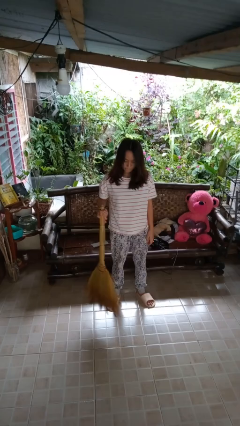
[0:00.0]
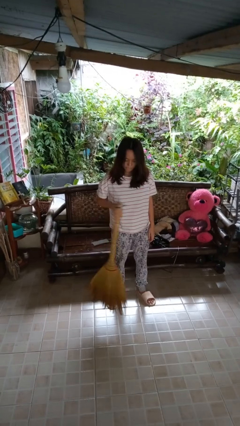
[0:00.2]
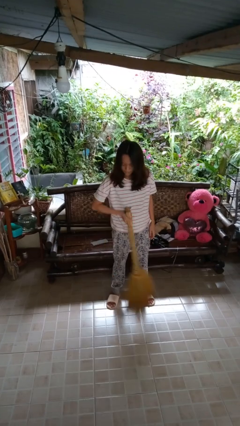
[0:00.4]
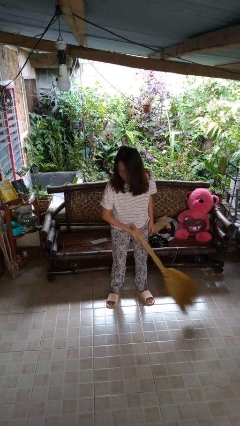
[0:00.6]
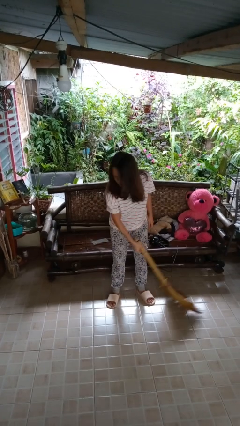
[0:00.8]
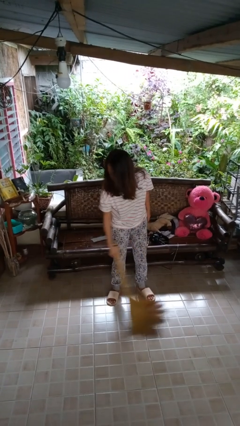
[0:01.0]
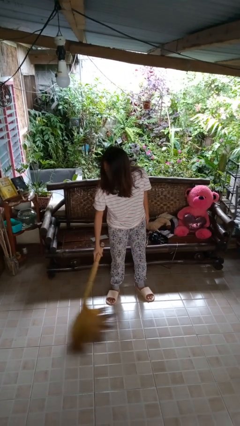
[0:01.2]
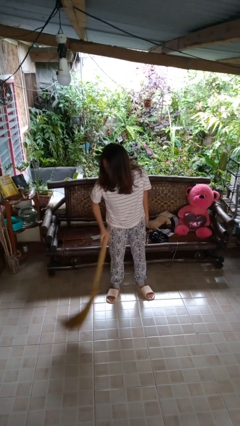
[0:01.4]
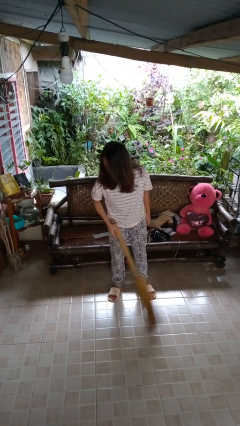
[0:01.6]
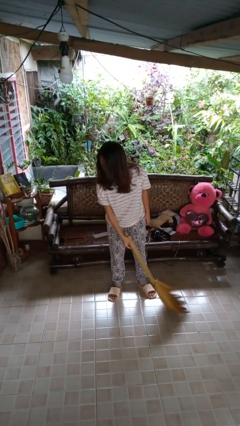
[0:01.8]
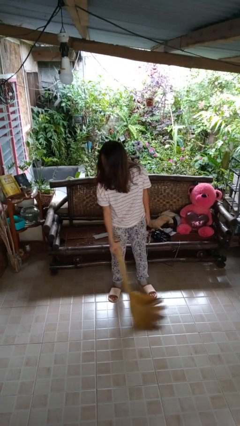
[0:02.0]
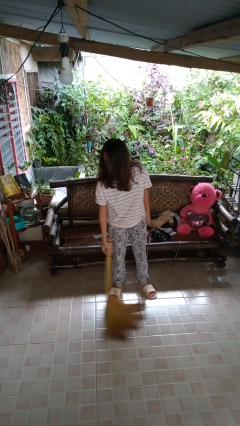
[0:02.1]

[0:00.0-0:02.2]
person sweeps floor

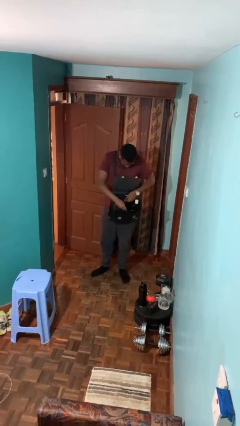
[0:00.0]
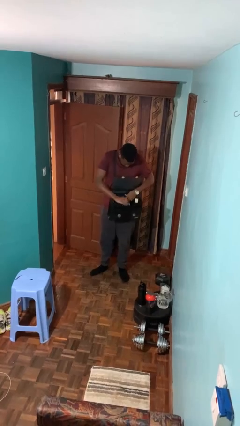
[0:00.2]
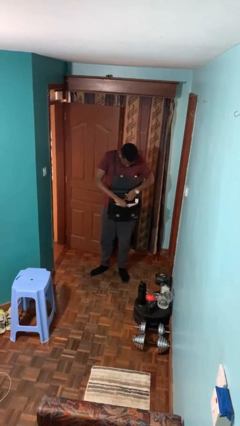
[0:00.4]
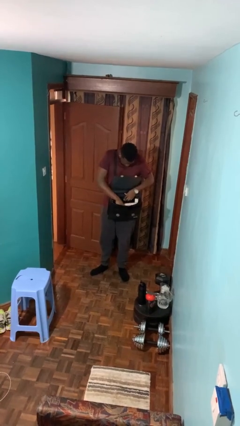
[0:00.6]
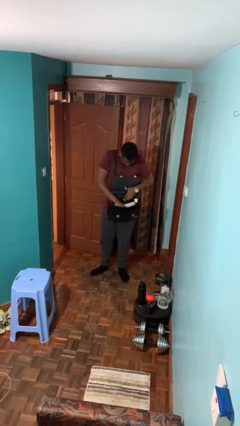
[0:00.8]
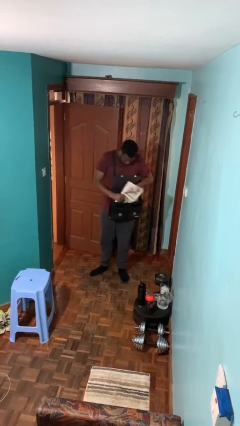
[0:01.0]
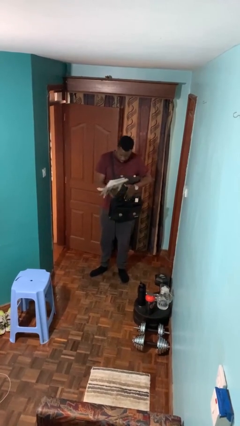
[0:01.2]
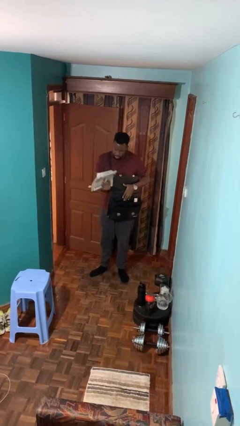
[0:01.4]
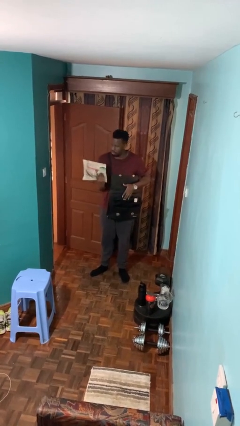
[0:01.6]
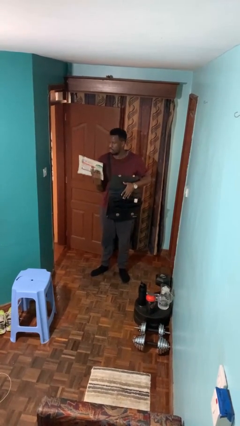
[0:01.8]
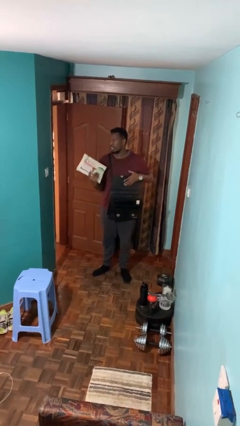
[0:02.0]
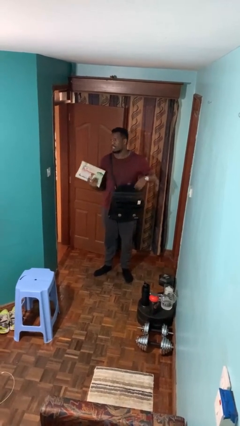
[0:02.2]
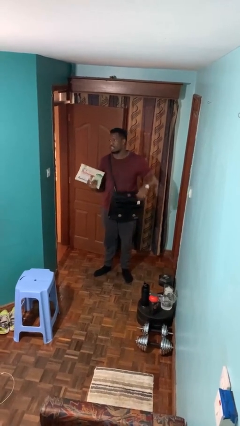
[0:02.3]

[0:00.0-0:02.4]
person takes object from purse

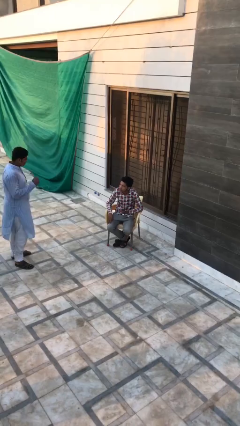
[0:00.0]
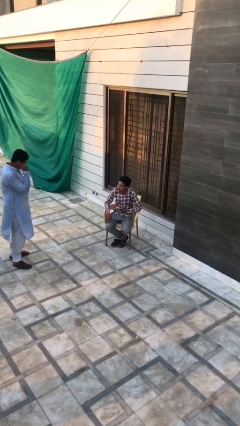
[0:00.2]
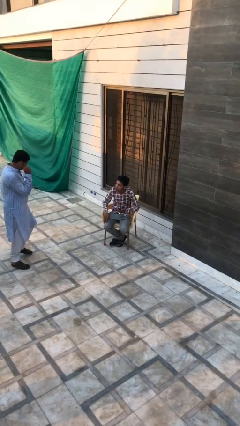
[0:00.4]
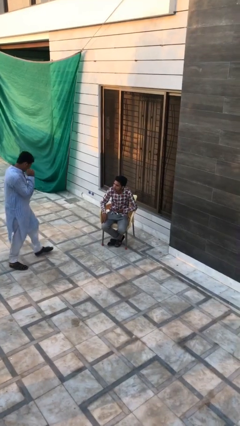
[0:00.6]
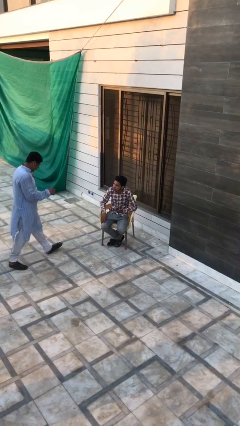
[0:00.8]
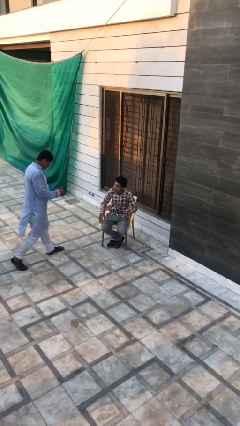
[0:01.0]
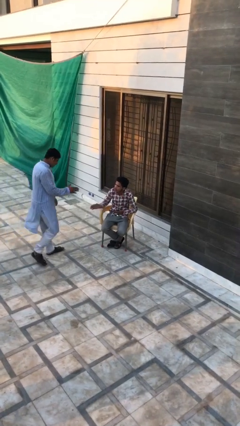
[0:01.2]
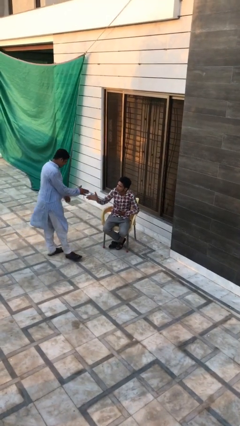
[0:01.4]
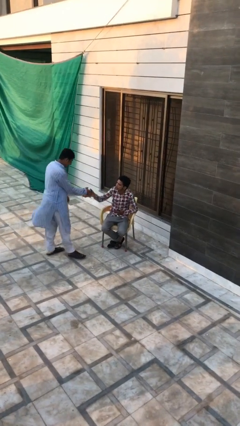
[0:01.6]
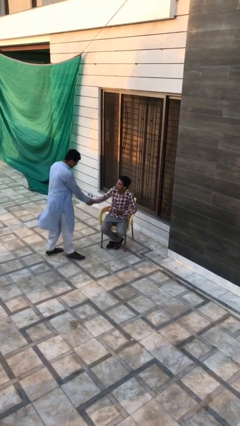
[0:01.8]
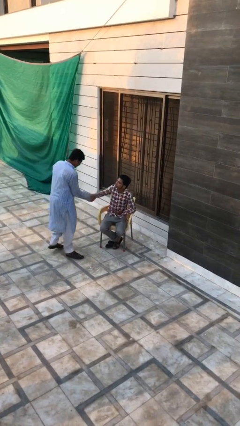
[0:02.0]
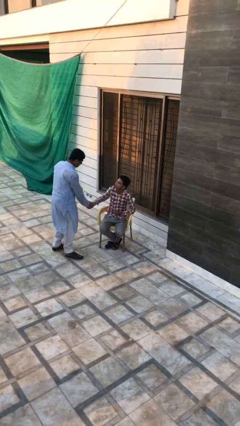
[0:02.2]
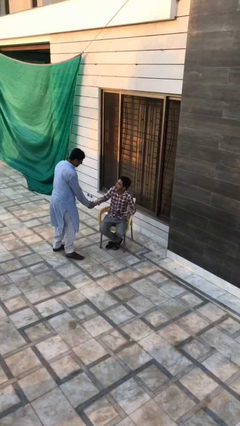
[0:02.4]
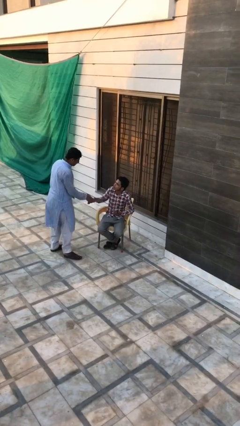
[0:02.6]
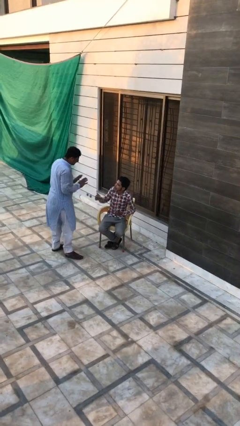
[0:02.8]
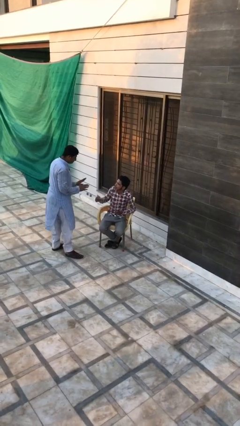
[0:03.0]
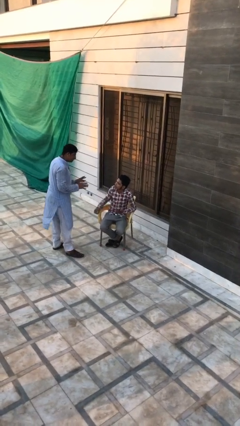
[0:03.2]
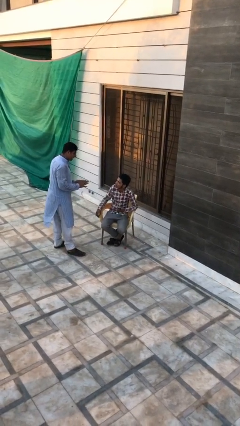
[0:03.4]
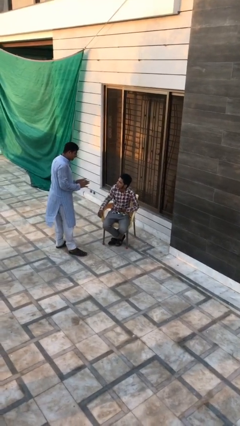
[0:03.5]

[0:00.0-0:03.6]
person shakes hand

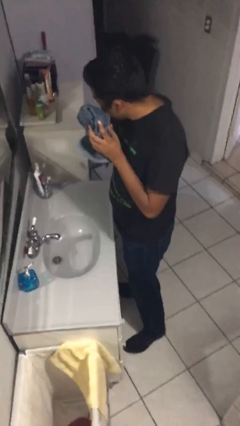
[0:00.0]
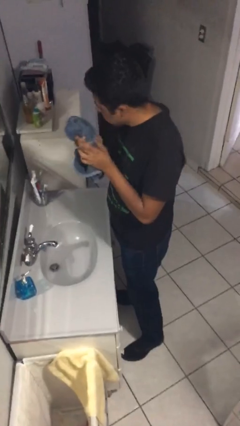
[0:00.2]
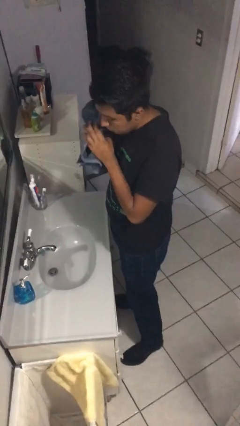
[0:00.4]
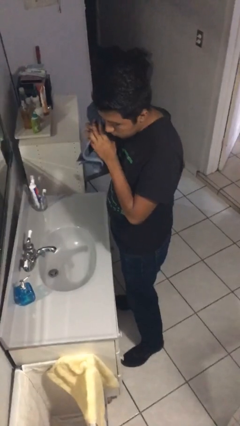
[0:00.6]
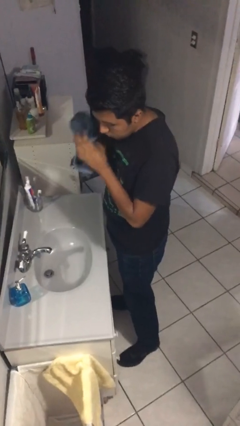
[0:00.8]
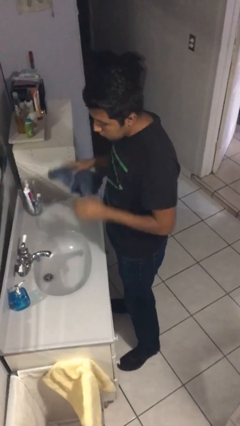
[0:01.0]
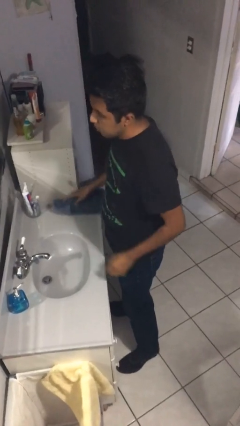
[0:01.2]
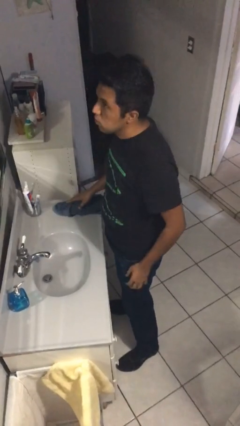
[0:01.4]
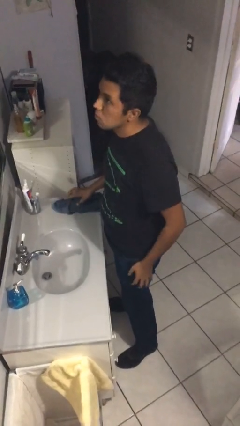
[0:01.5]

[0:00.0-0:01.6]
person dries face with towel

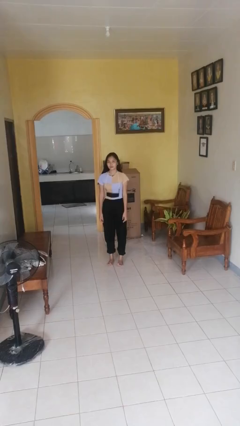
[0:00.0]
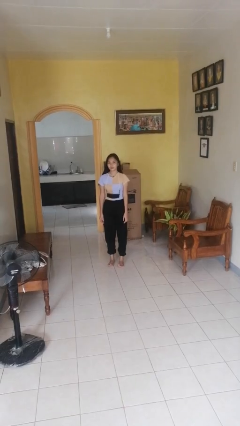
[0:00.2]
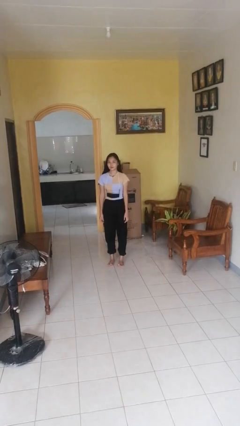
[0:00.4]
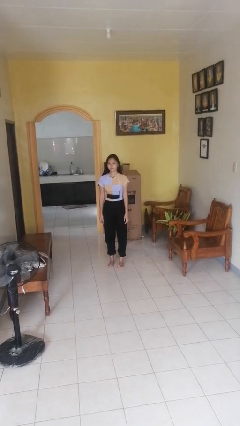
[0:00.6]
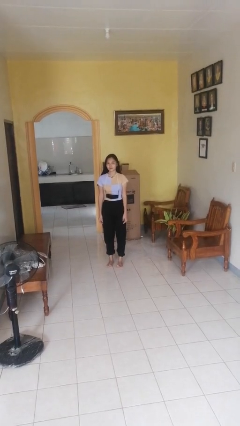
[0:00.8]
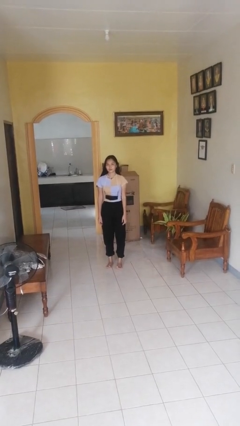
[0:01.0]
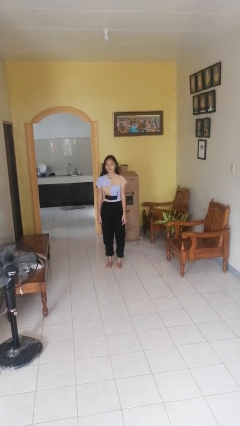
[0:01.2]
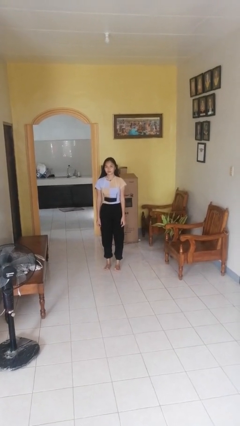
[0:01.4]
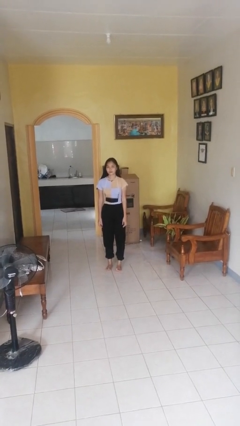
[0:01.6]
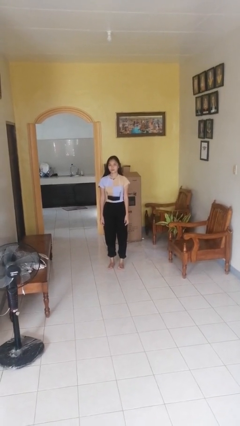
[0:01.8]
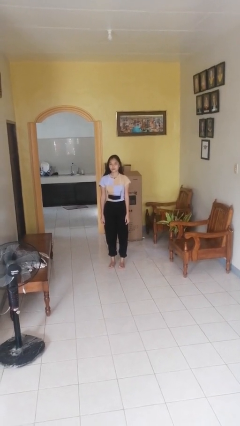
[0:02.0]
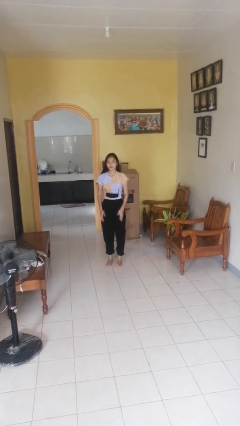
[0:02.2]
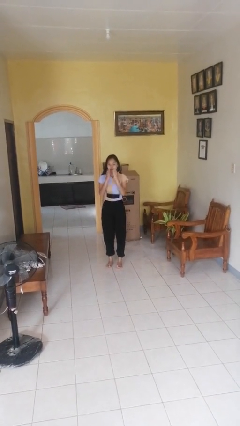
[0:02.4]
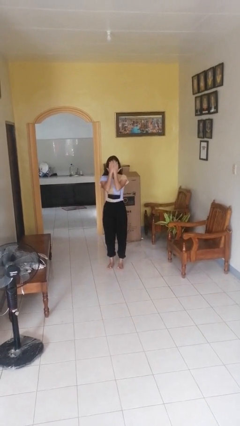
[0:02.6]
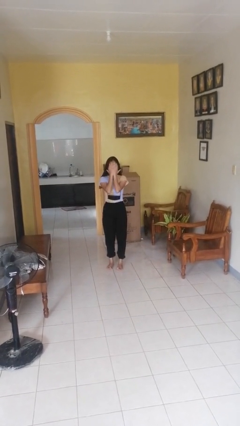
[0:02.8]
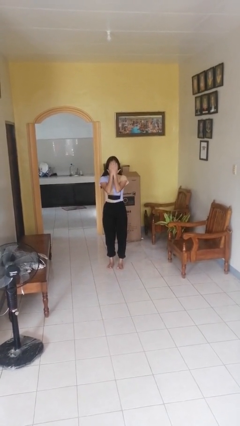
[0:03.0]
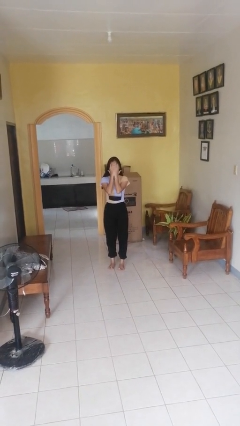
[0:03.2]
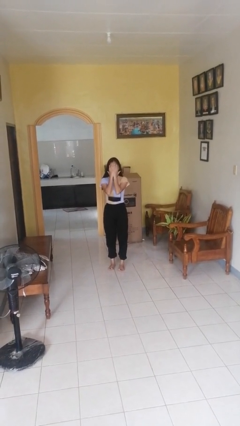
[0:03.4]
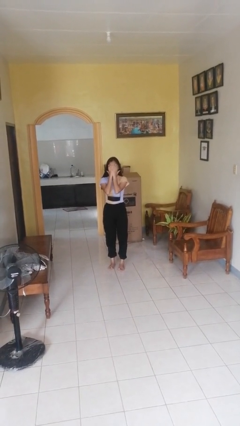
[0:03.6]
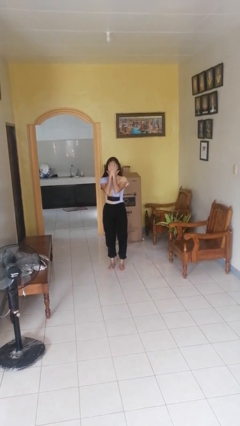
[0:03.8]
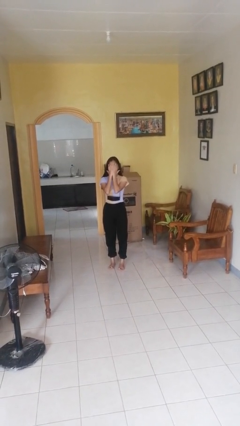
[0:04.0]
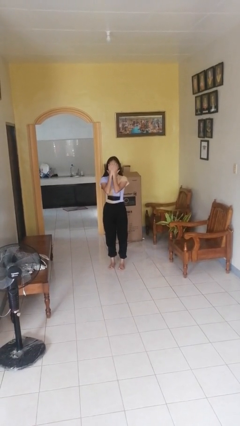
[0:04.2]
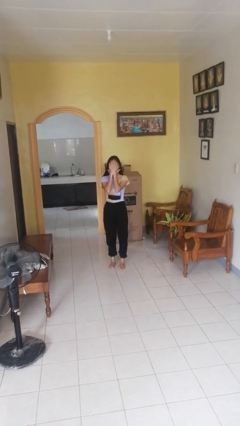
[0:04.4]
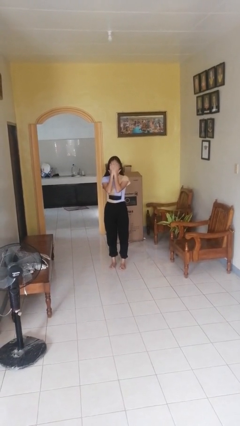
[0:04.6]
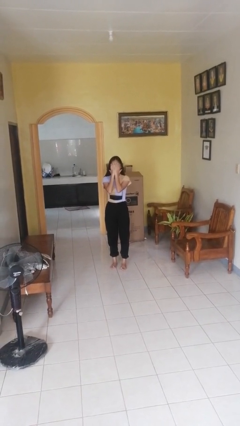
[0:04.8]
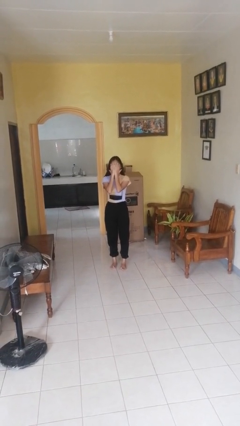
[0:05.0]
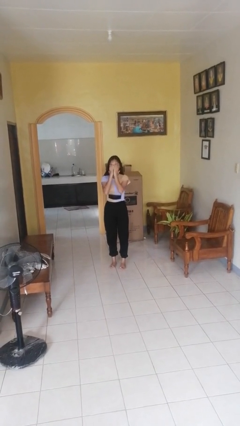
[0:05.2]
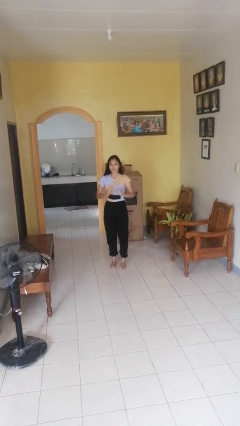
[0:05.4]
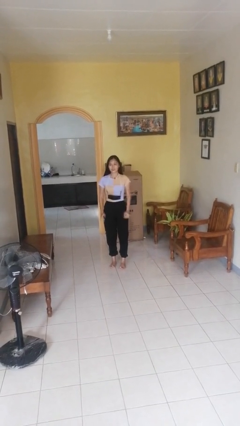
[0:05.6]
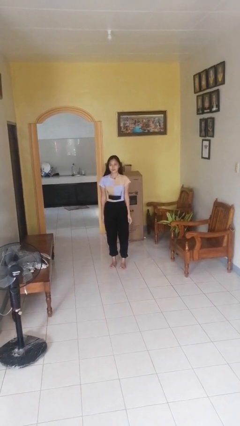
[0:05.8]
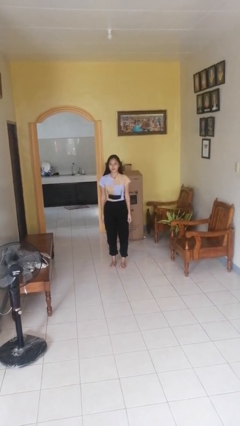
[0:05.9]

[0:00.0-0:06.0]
person covers face with hands

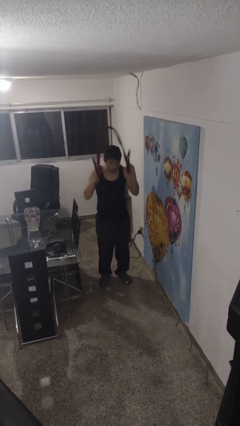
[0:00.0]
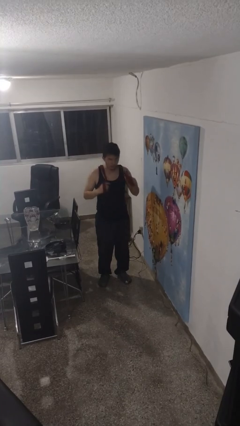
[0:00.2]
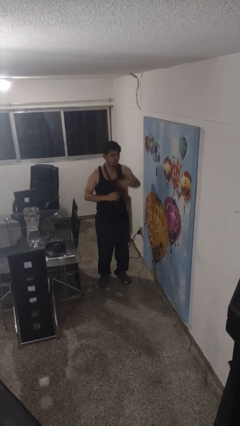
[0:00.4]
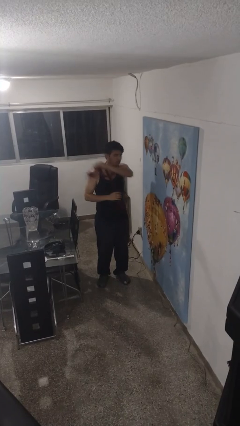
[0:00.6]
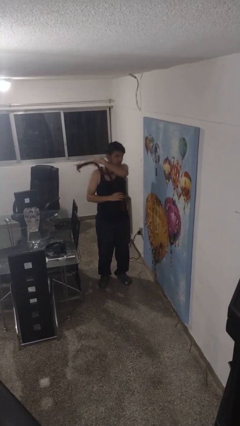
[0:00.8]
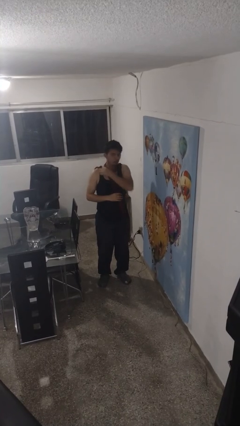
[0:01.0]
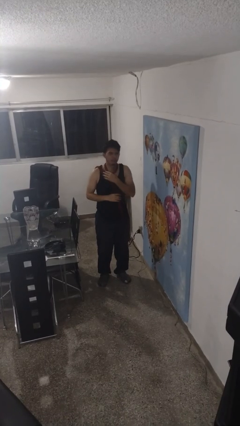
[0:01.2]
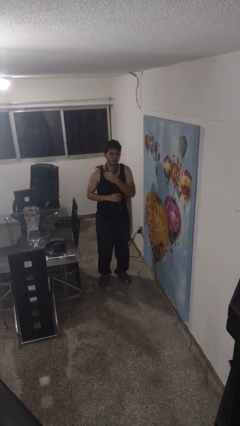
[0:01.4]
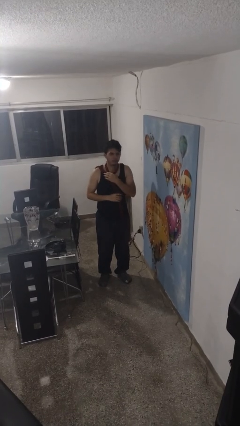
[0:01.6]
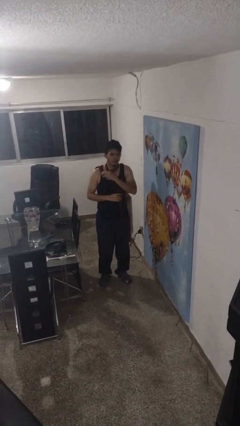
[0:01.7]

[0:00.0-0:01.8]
person puts on scarf
